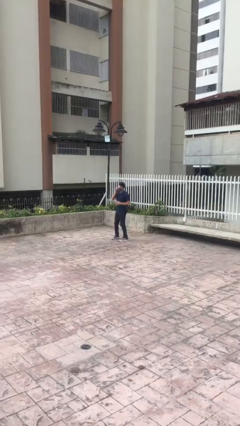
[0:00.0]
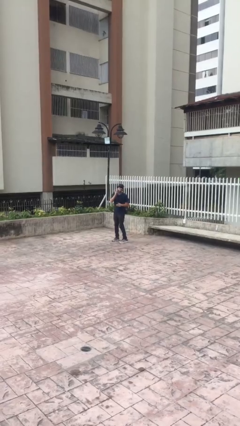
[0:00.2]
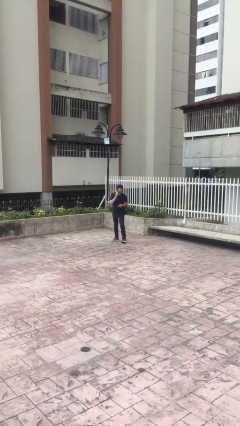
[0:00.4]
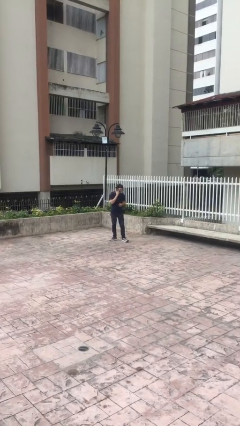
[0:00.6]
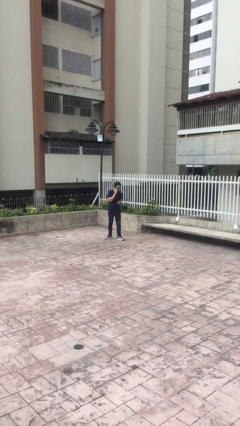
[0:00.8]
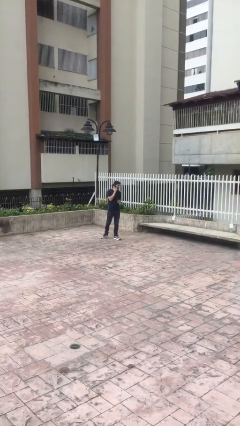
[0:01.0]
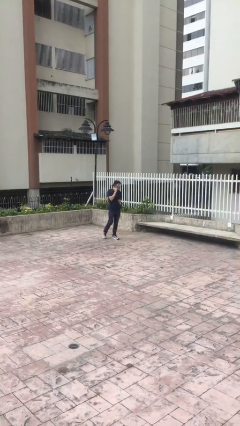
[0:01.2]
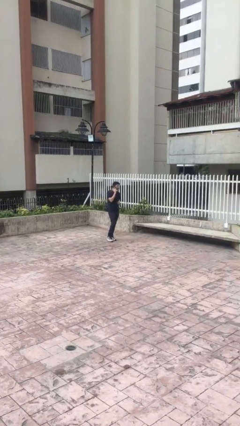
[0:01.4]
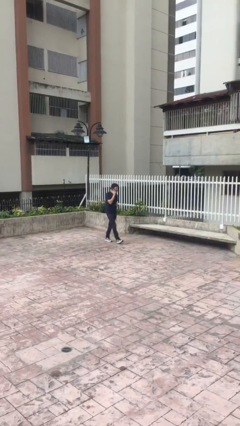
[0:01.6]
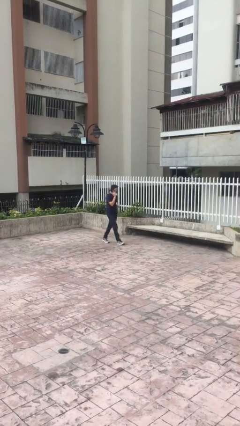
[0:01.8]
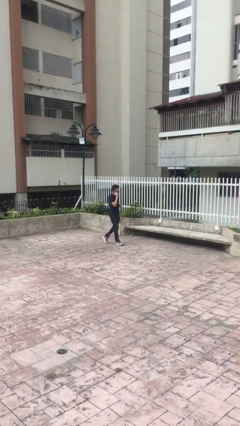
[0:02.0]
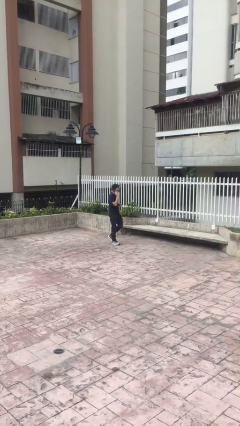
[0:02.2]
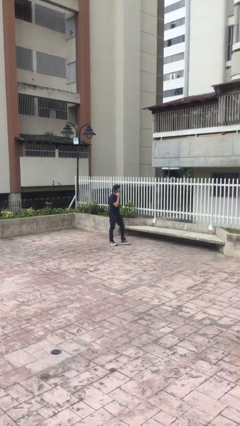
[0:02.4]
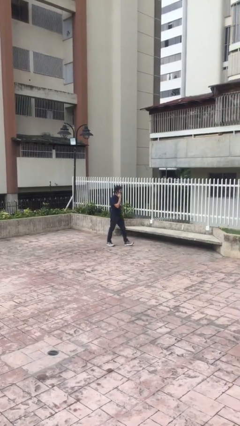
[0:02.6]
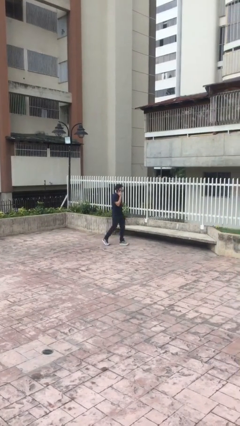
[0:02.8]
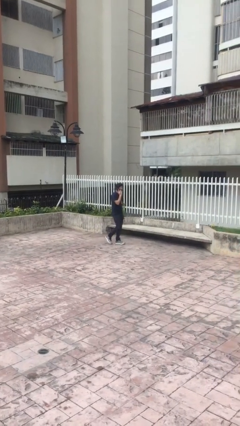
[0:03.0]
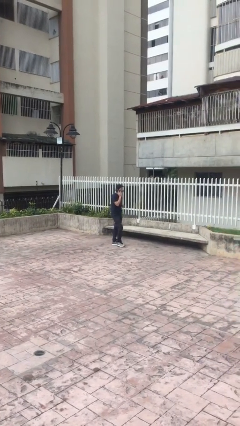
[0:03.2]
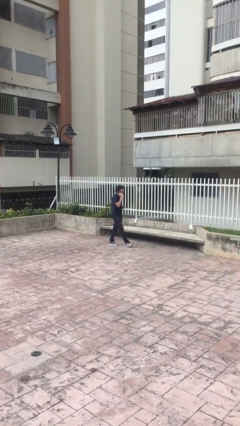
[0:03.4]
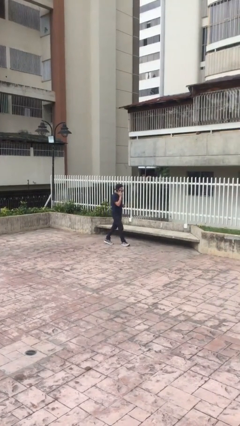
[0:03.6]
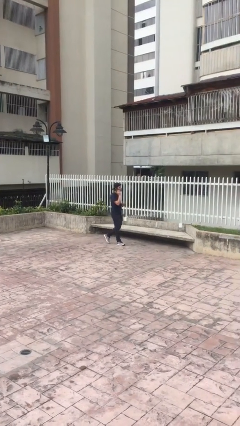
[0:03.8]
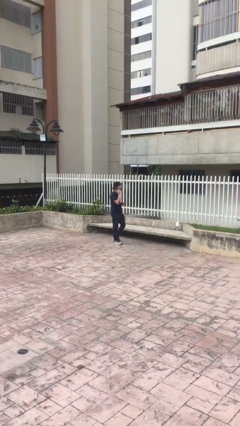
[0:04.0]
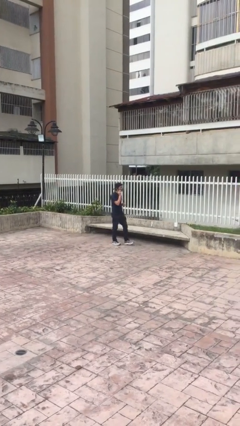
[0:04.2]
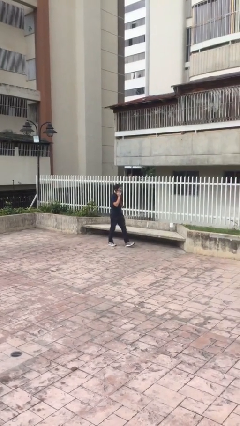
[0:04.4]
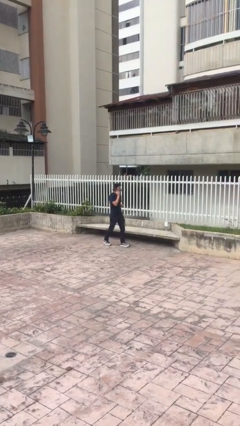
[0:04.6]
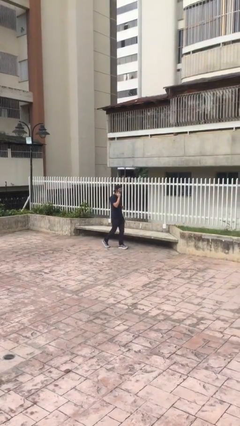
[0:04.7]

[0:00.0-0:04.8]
person talks on phone

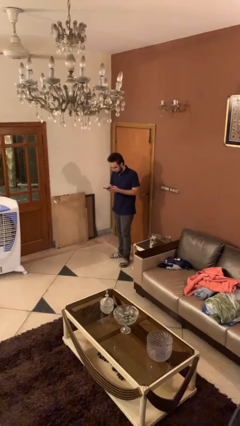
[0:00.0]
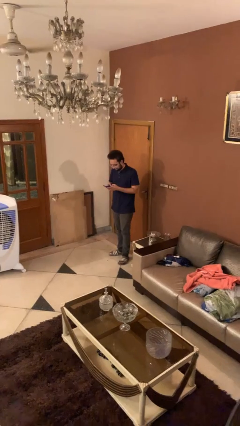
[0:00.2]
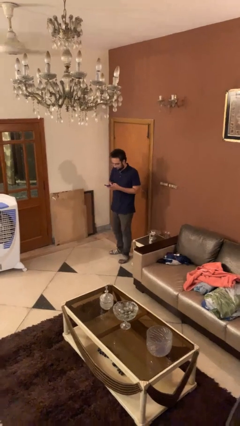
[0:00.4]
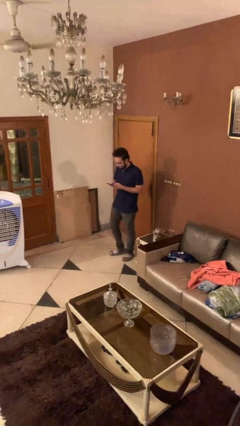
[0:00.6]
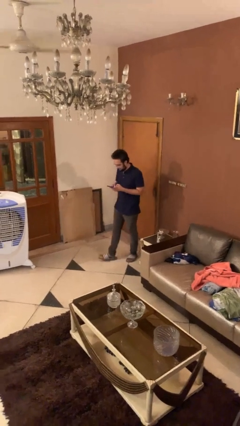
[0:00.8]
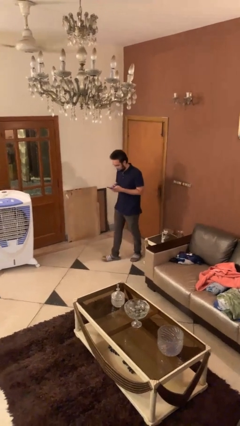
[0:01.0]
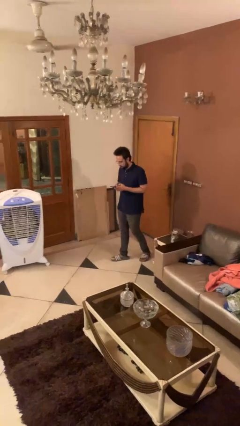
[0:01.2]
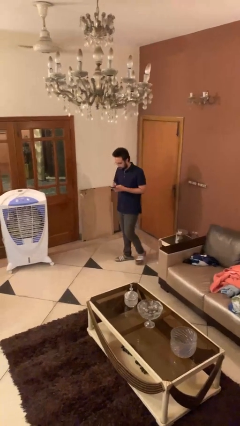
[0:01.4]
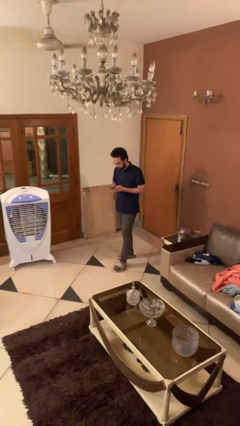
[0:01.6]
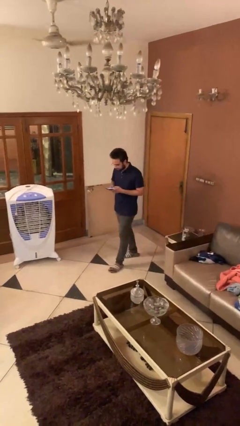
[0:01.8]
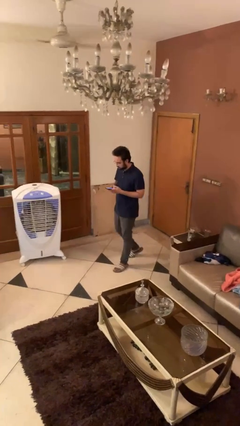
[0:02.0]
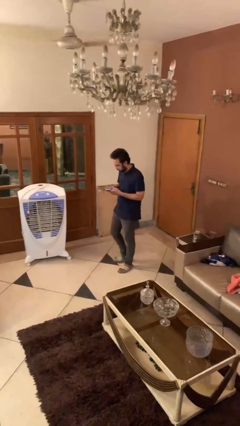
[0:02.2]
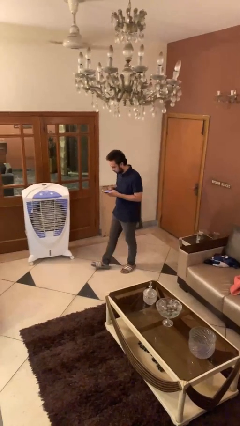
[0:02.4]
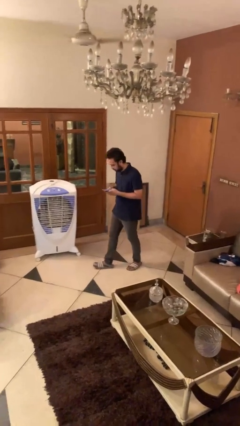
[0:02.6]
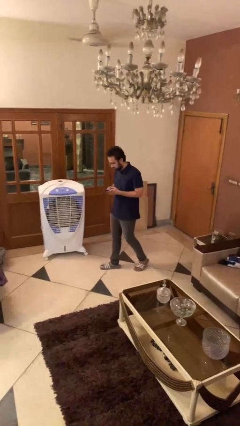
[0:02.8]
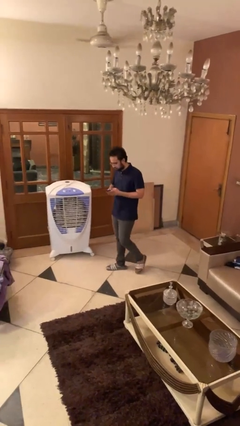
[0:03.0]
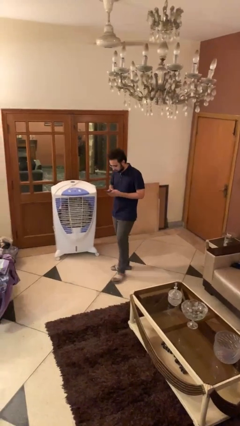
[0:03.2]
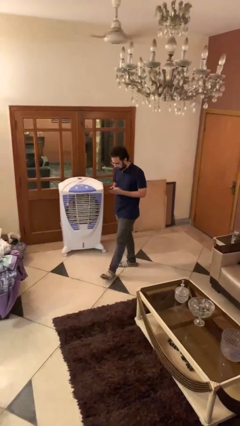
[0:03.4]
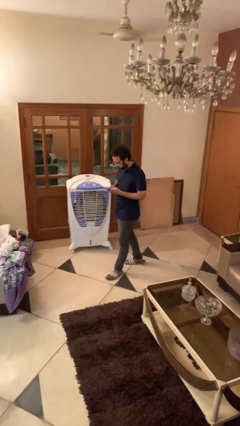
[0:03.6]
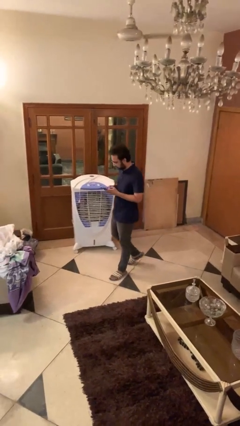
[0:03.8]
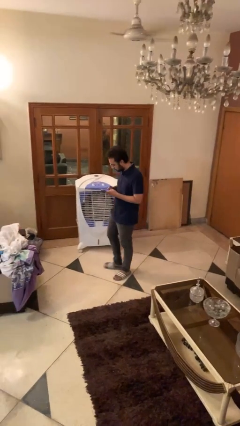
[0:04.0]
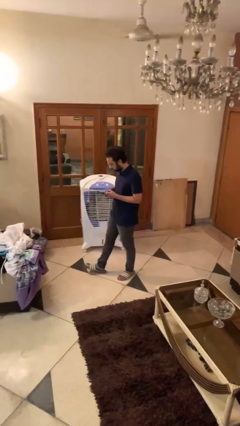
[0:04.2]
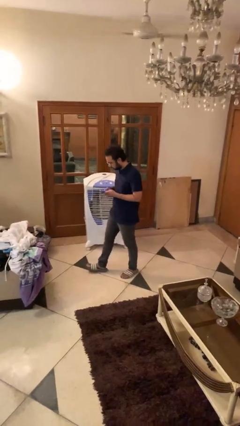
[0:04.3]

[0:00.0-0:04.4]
person texts on phone

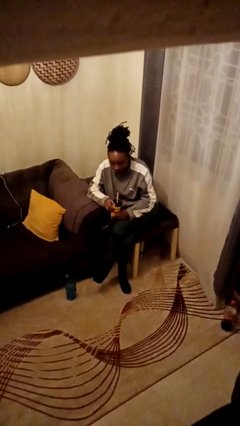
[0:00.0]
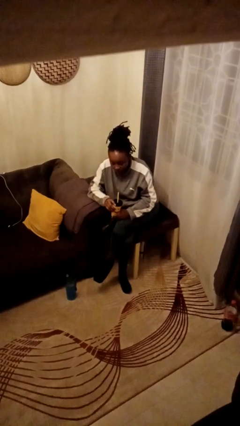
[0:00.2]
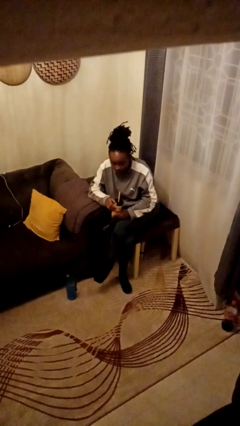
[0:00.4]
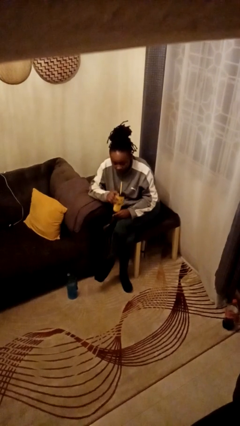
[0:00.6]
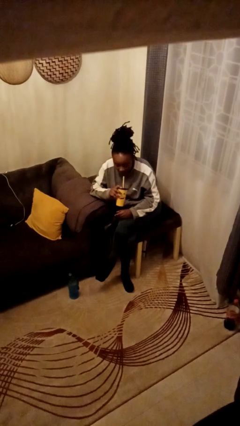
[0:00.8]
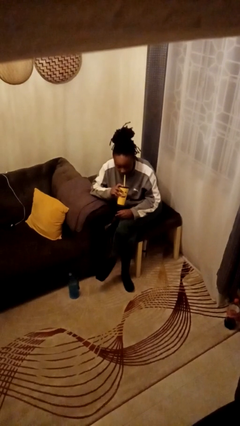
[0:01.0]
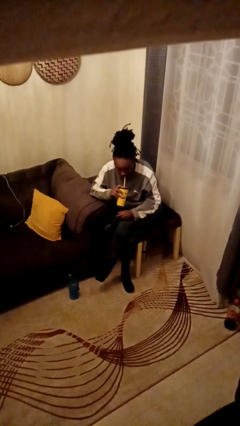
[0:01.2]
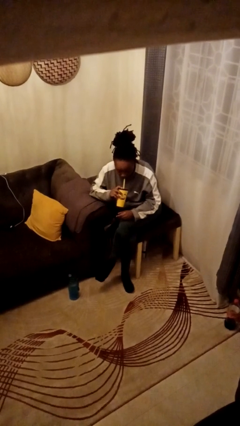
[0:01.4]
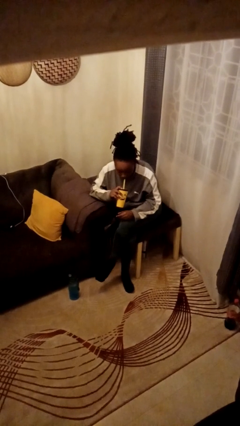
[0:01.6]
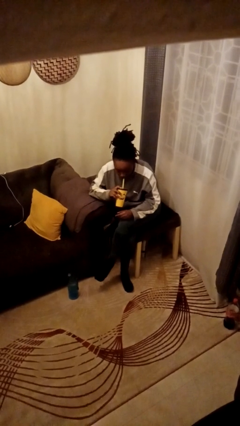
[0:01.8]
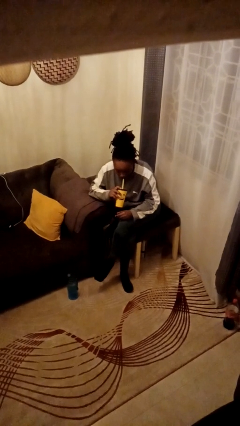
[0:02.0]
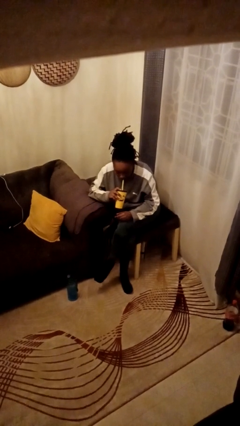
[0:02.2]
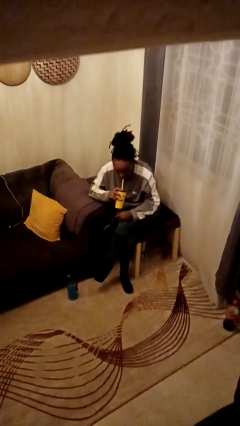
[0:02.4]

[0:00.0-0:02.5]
person drinks from straw

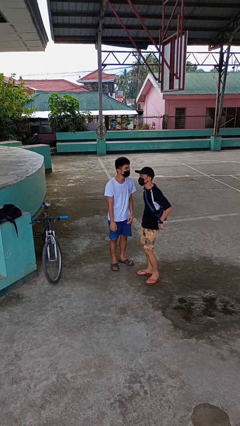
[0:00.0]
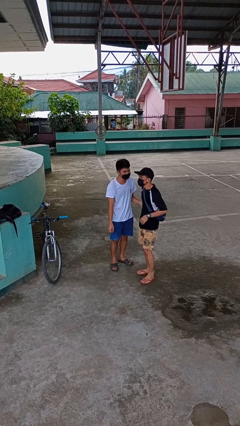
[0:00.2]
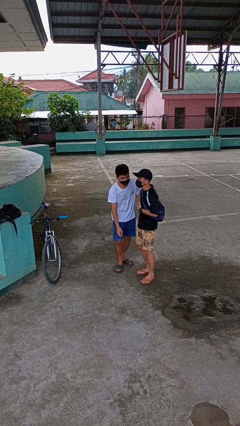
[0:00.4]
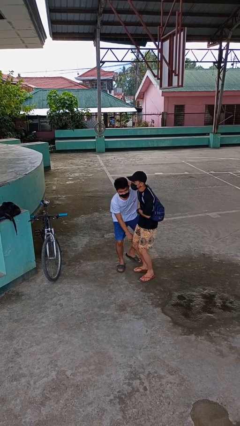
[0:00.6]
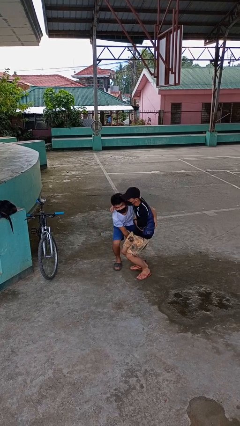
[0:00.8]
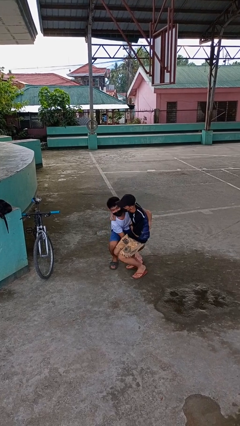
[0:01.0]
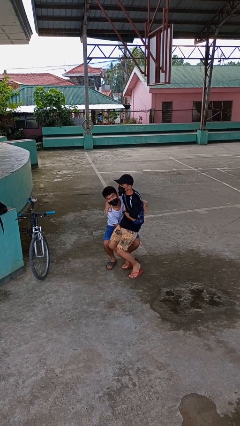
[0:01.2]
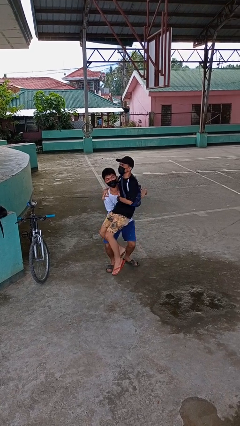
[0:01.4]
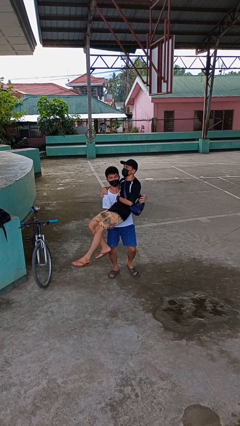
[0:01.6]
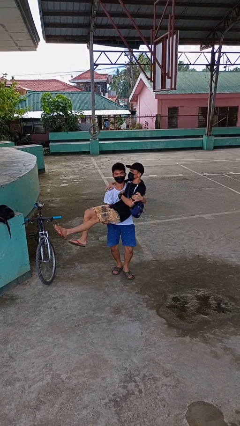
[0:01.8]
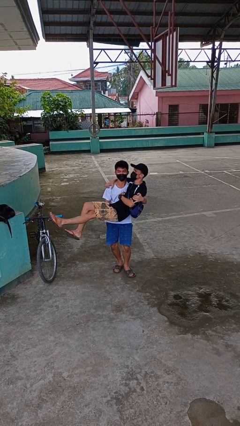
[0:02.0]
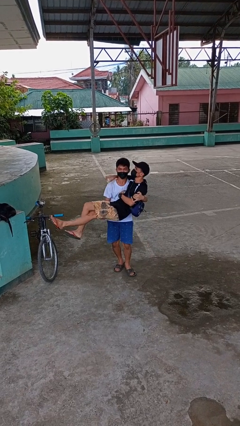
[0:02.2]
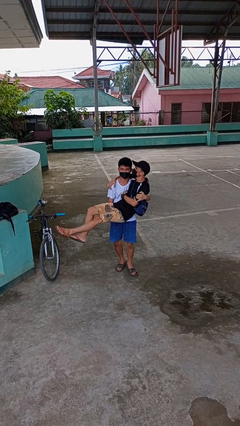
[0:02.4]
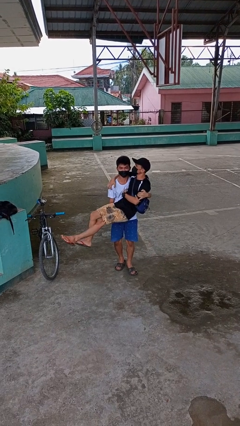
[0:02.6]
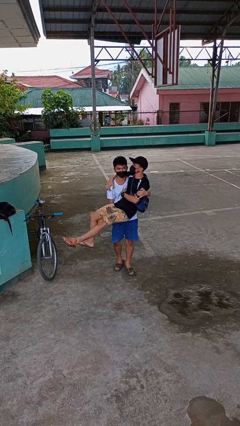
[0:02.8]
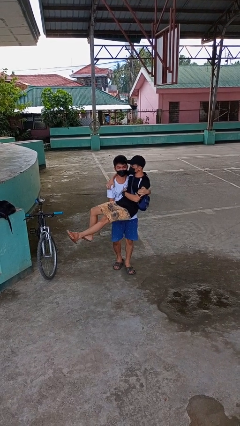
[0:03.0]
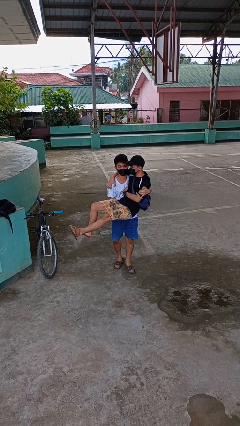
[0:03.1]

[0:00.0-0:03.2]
person picks up person

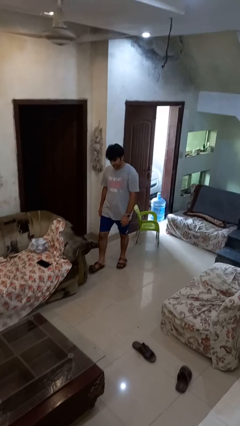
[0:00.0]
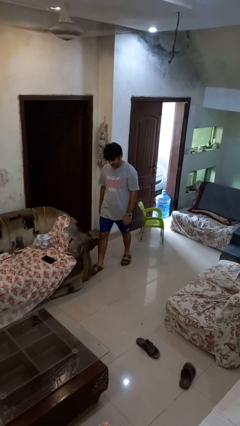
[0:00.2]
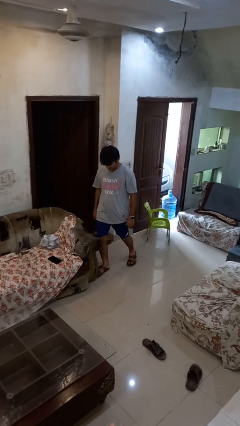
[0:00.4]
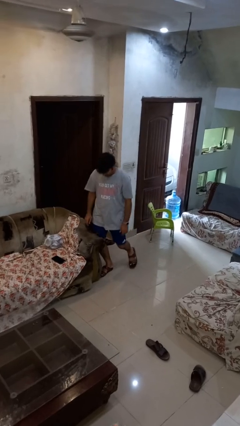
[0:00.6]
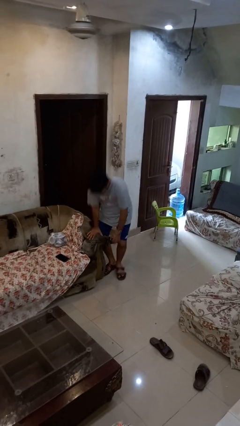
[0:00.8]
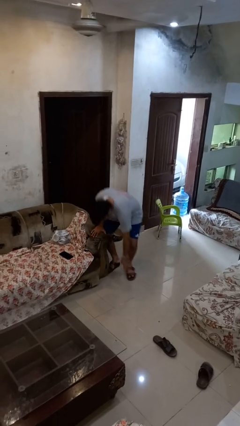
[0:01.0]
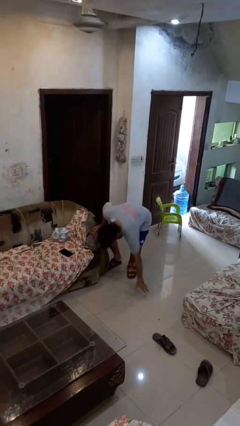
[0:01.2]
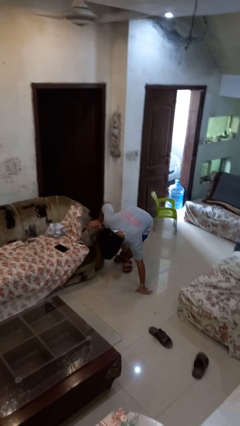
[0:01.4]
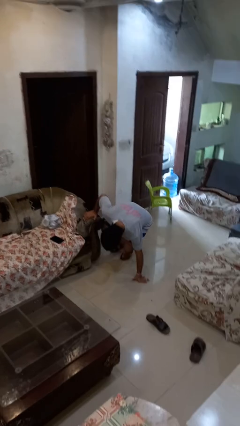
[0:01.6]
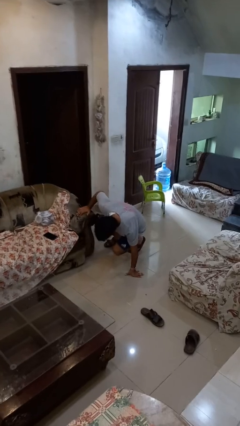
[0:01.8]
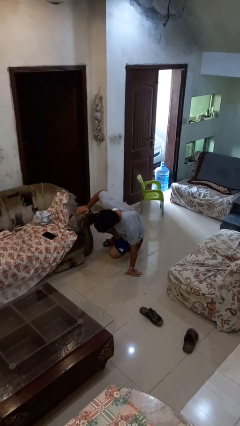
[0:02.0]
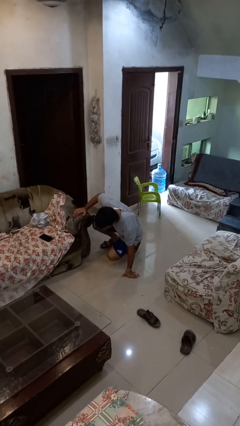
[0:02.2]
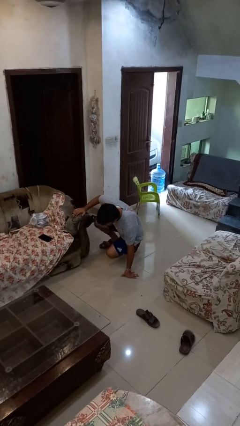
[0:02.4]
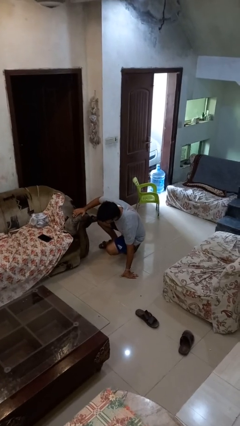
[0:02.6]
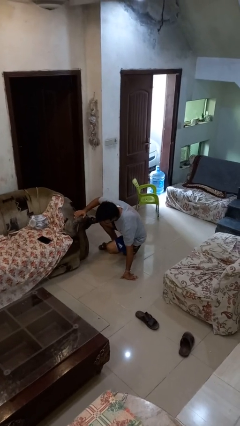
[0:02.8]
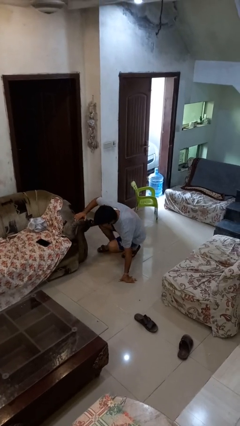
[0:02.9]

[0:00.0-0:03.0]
person trips on object on floor
